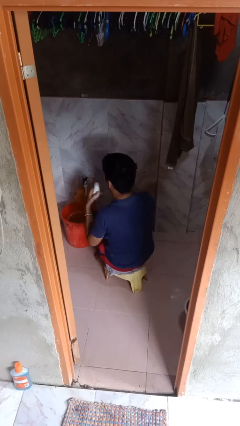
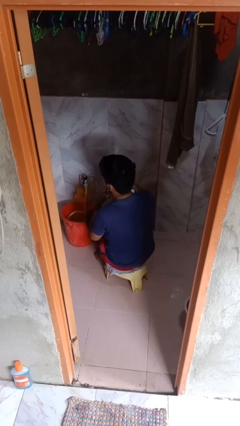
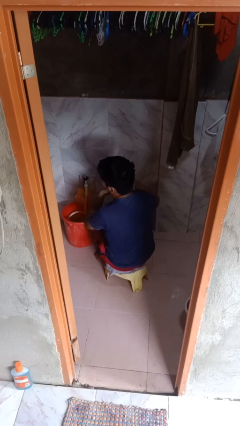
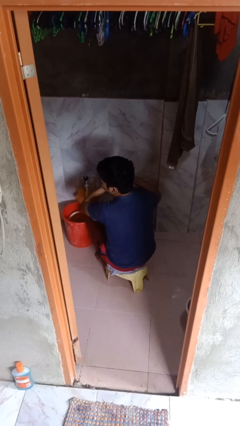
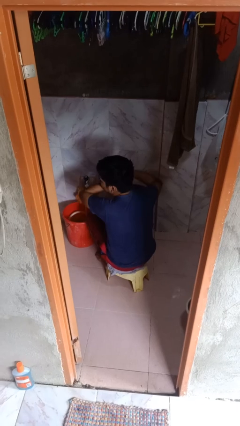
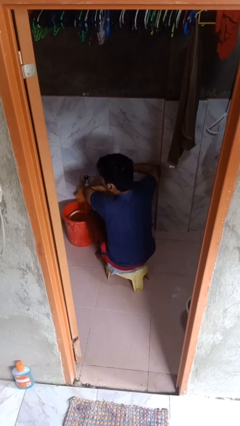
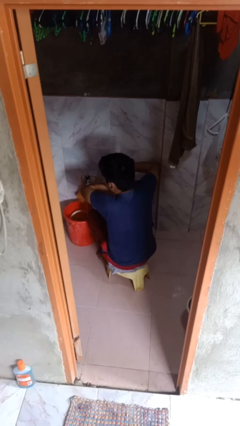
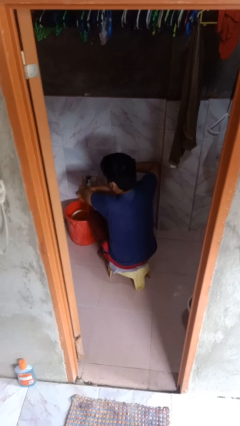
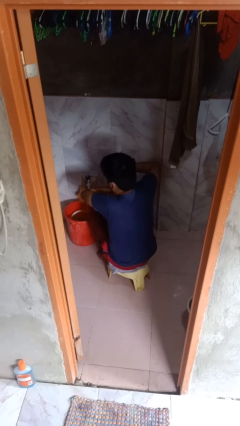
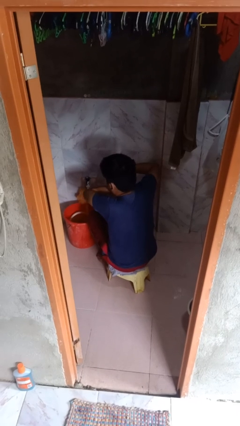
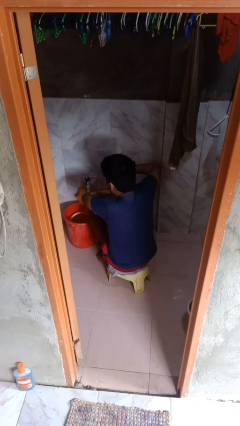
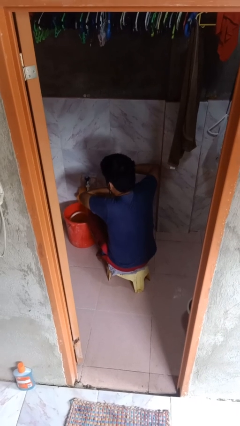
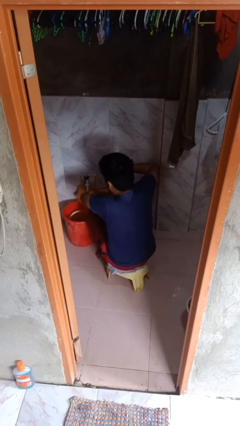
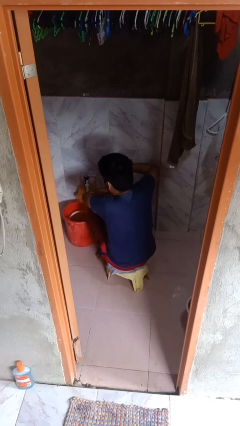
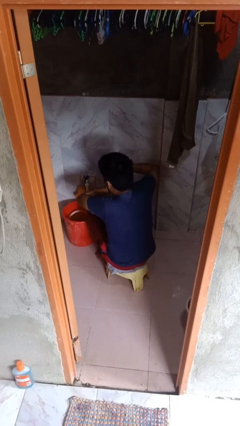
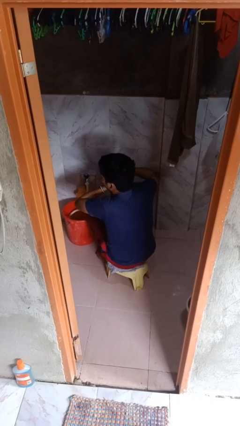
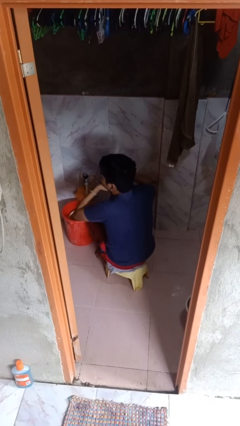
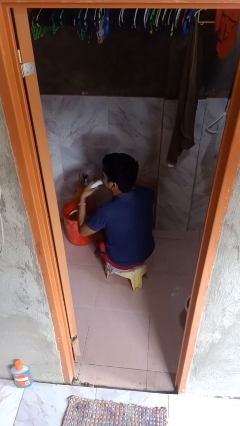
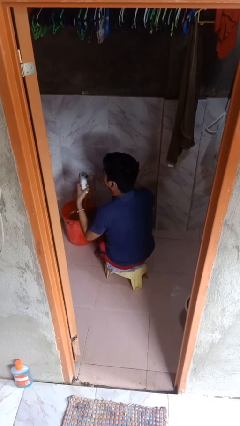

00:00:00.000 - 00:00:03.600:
person applies deodorant

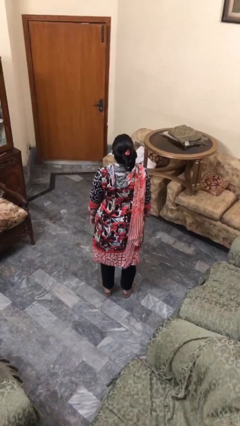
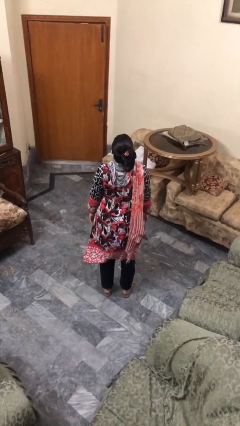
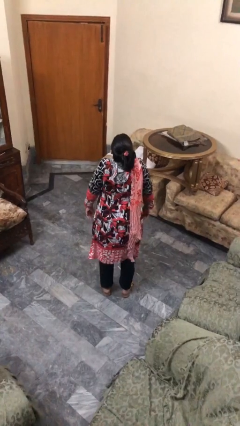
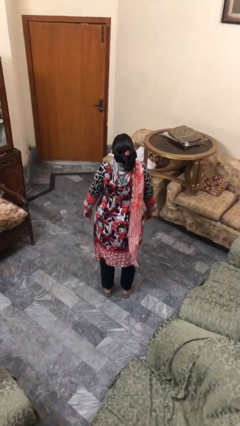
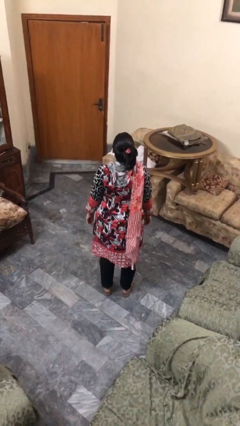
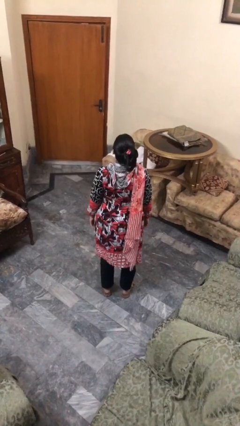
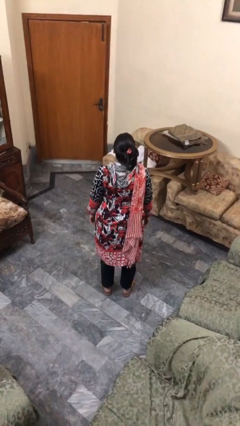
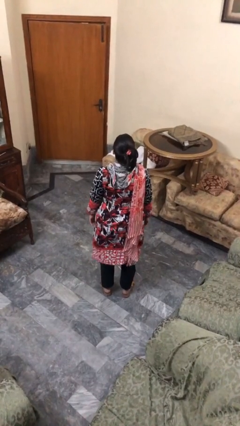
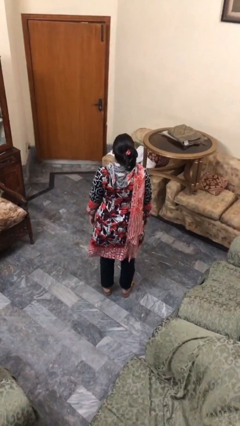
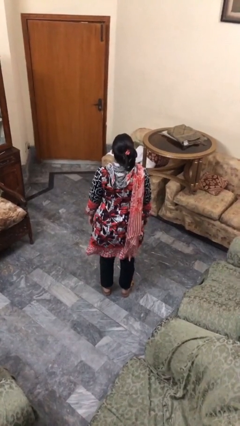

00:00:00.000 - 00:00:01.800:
person shrugs

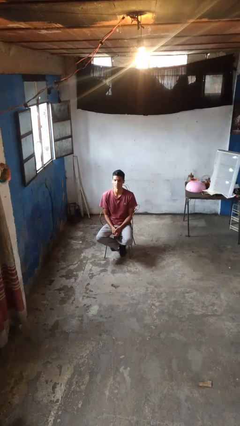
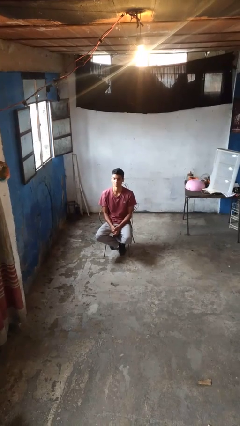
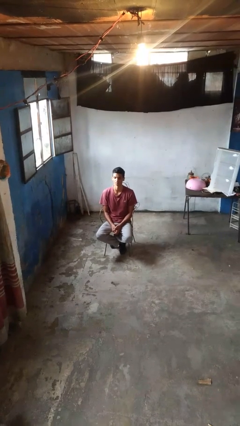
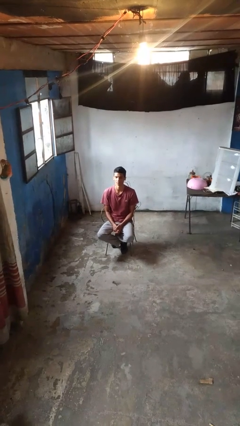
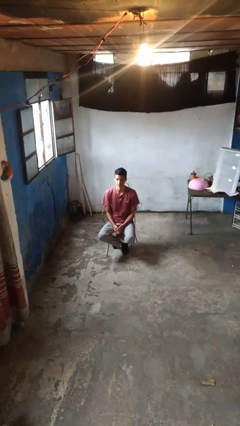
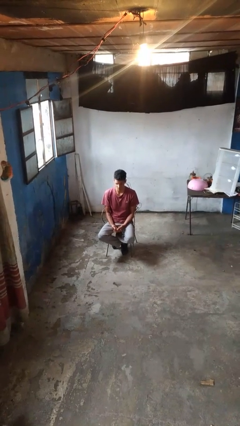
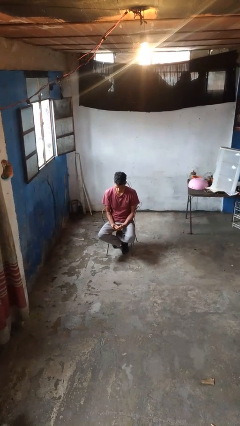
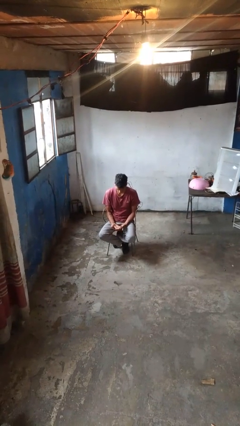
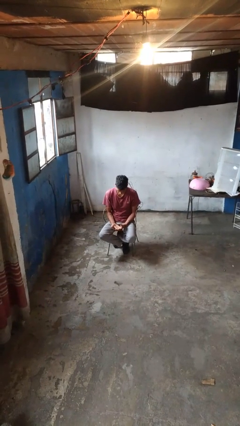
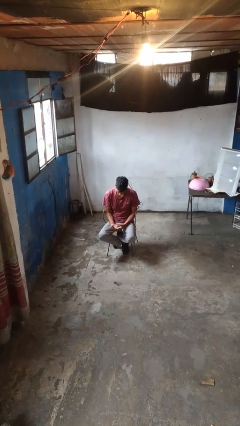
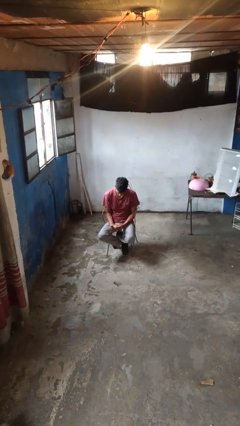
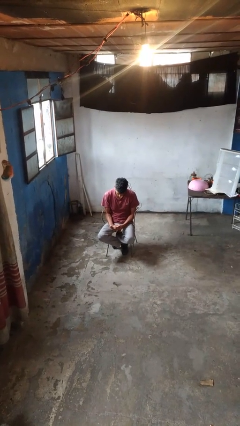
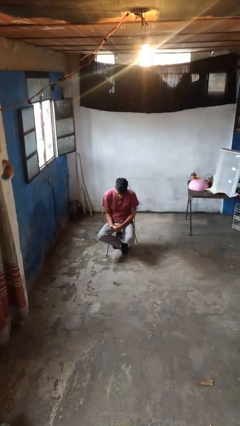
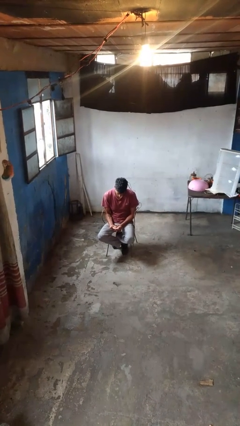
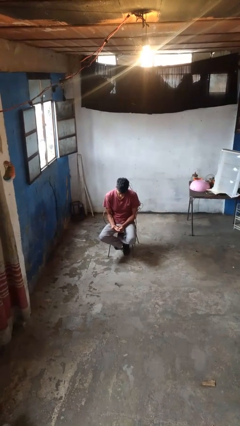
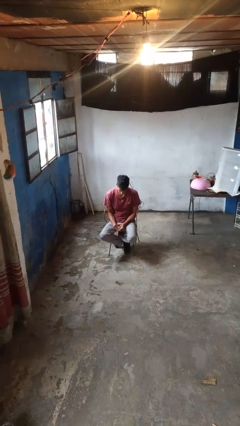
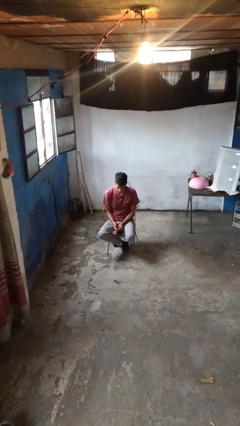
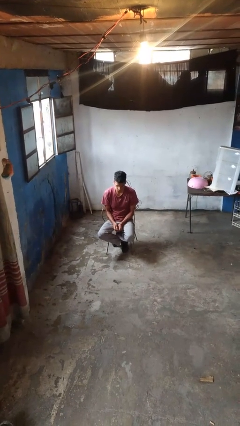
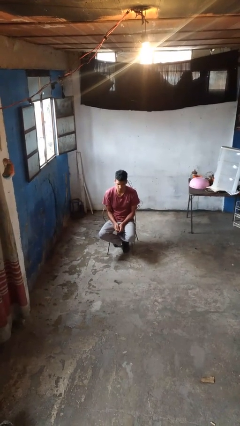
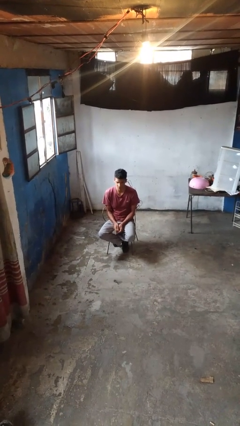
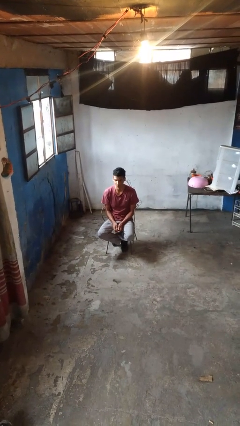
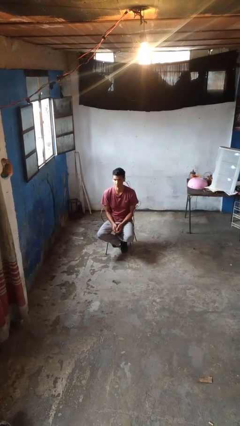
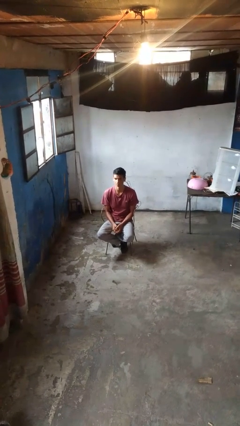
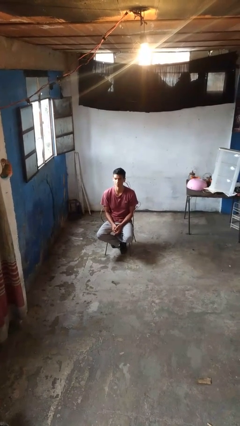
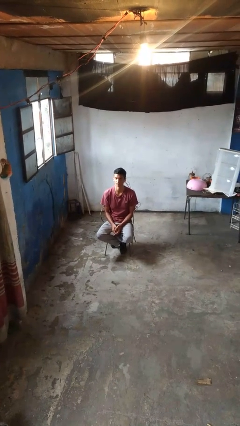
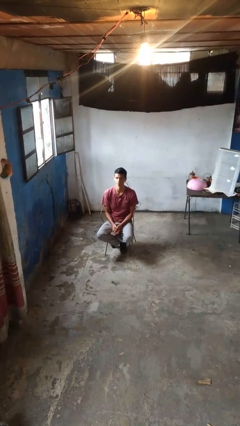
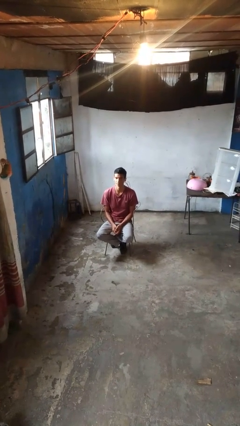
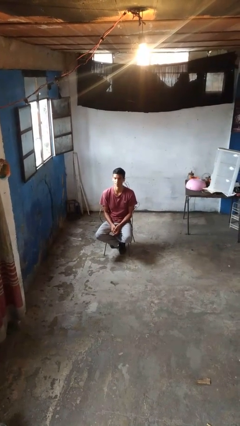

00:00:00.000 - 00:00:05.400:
person looks at hands in lap

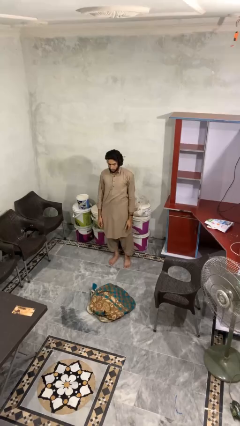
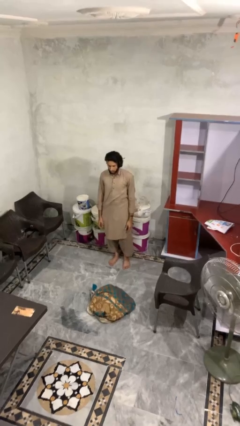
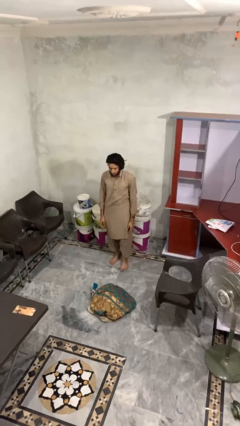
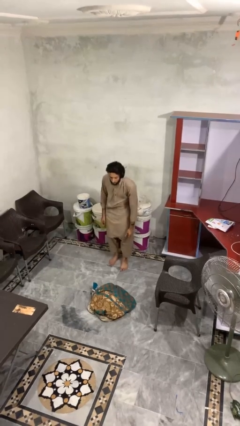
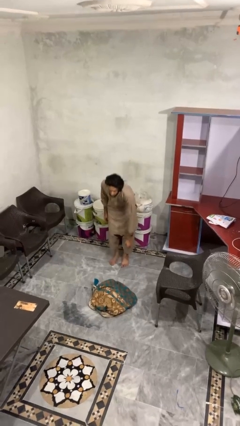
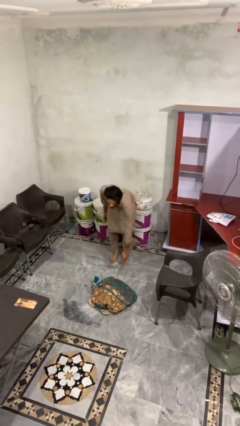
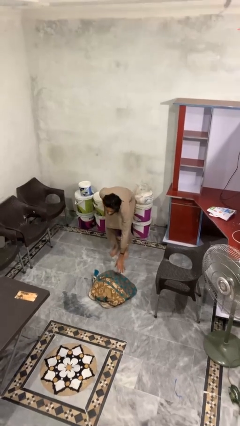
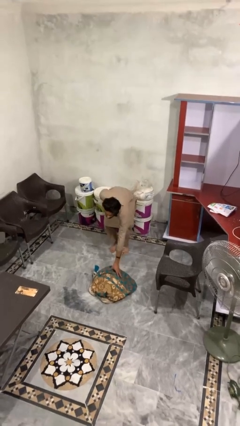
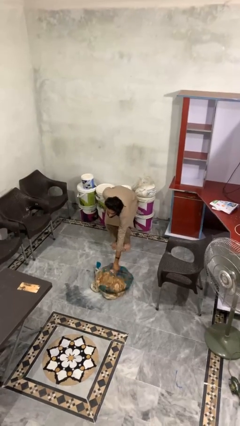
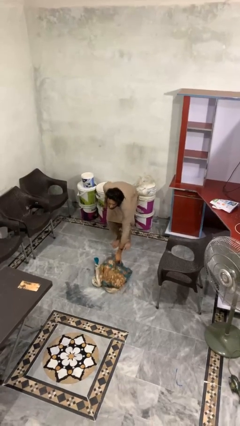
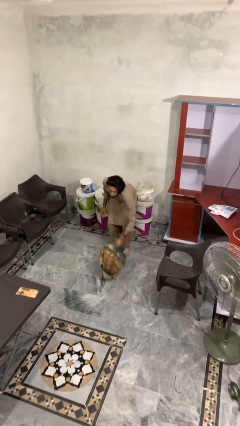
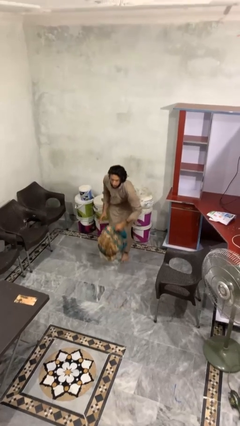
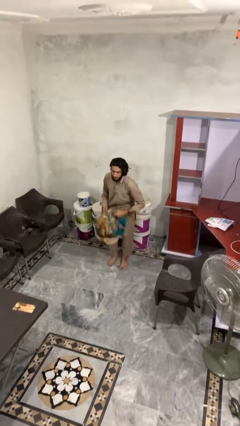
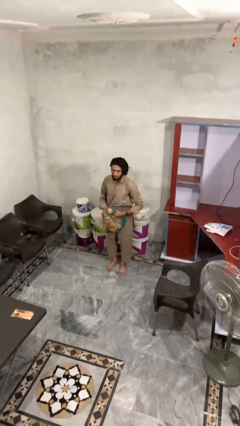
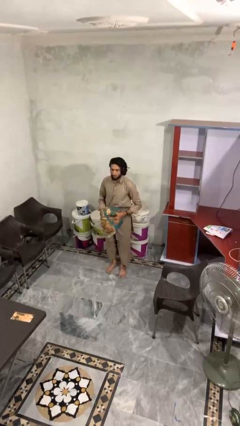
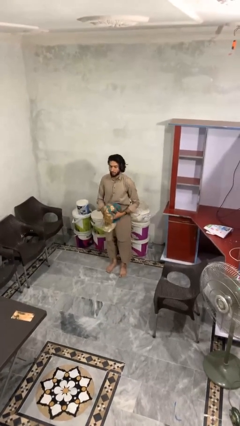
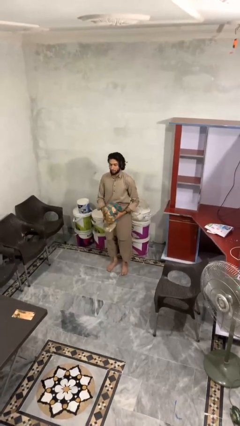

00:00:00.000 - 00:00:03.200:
person picks up object from floor

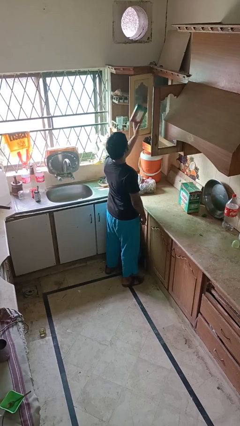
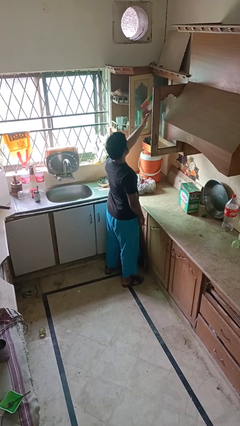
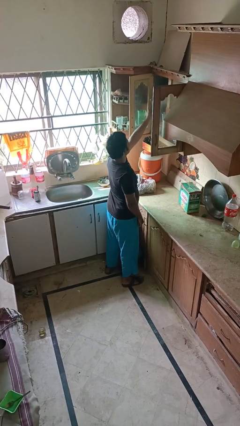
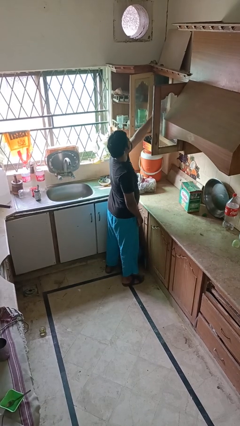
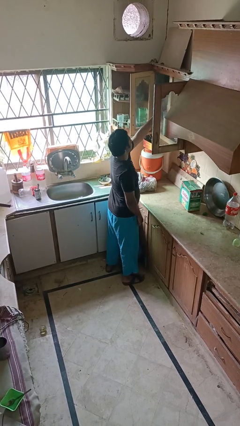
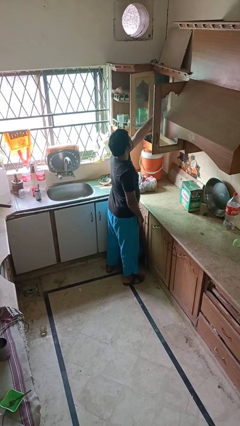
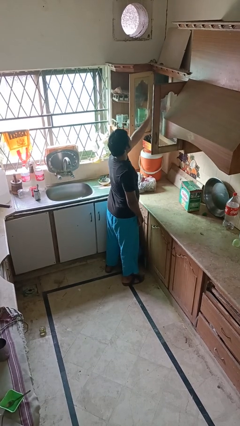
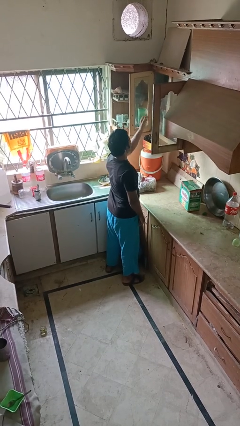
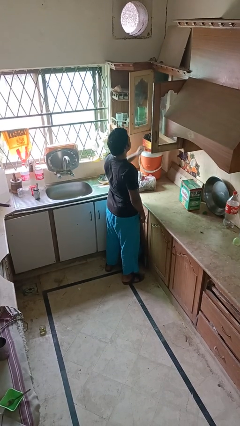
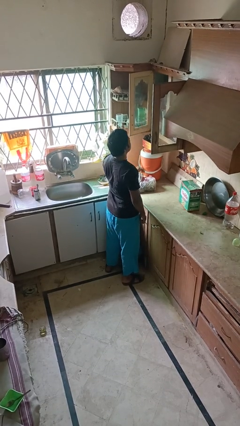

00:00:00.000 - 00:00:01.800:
person puts down object into cabinet

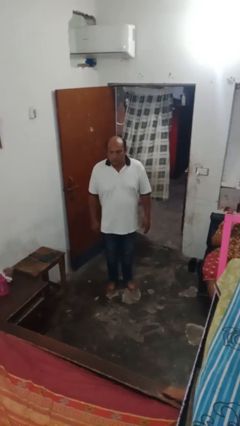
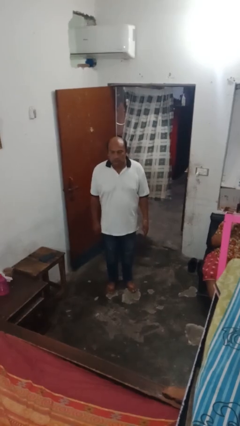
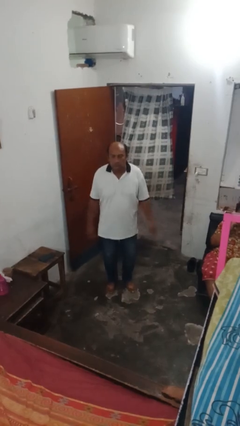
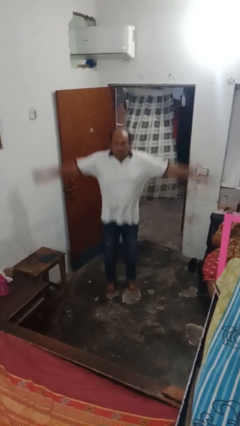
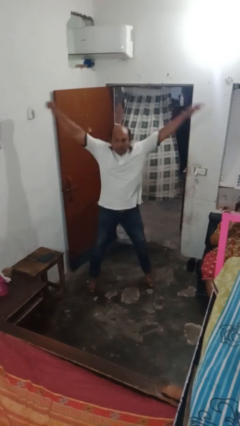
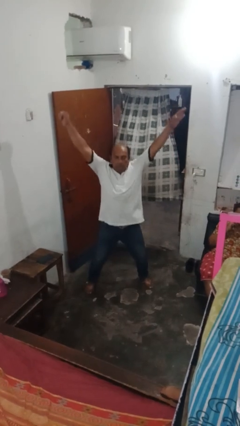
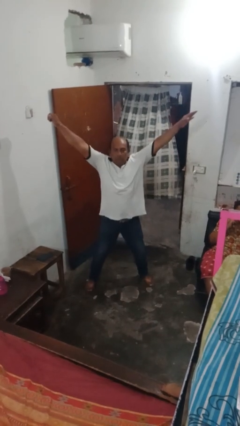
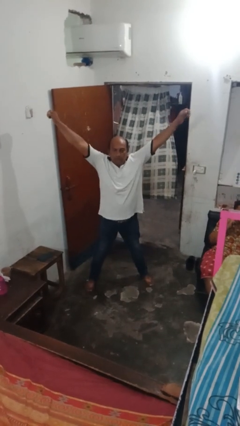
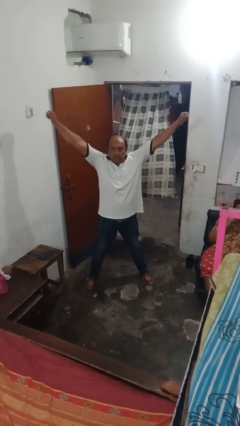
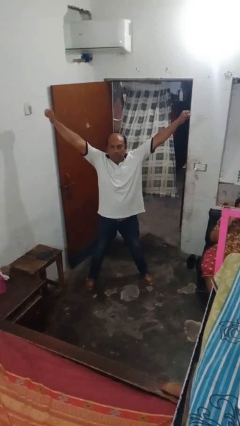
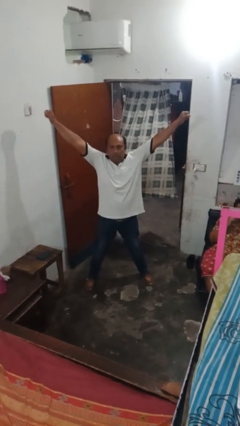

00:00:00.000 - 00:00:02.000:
person exercises with jumping jacks
